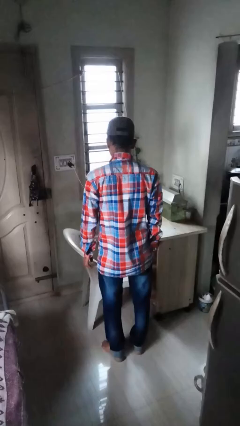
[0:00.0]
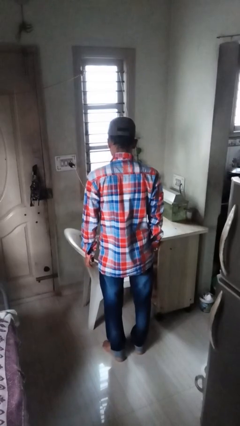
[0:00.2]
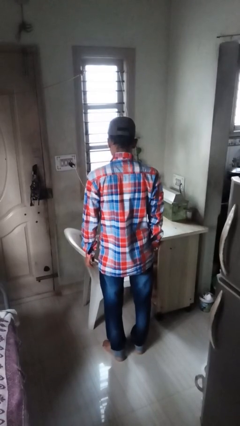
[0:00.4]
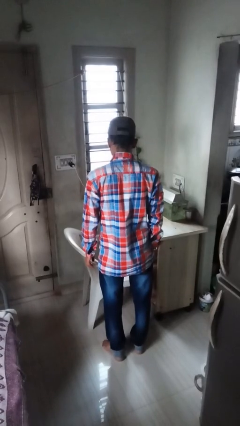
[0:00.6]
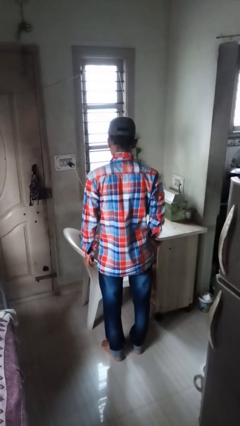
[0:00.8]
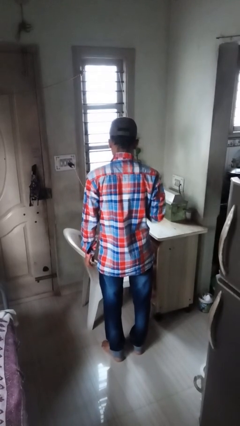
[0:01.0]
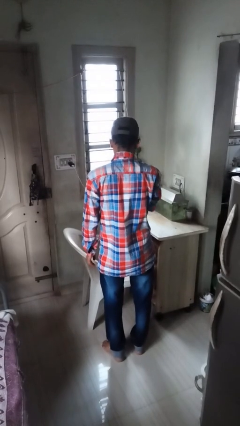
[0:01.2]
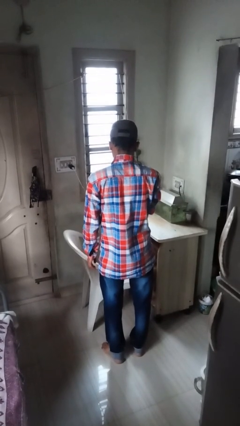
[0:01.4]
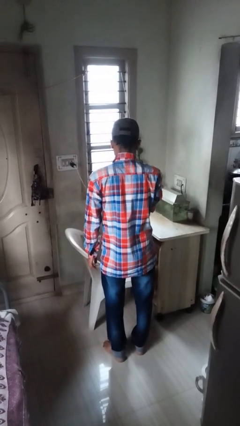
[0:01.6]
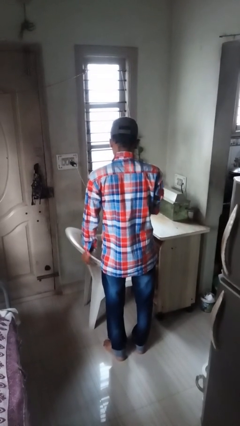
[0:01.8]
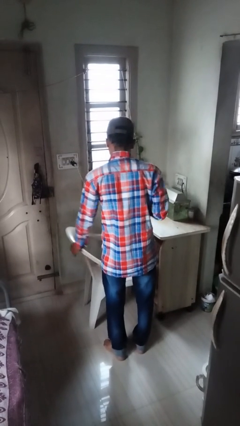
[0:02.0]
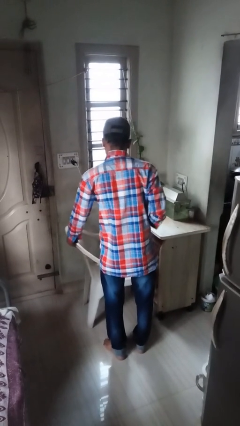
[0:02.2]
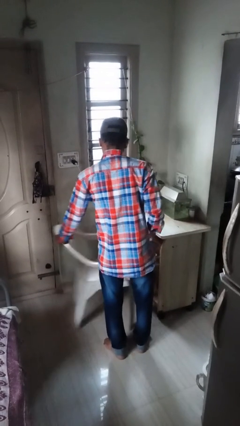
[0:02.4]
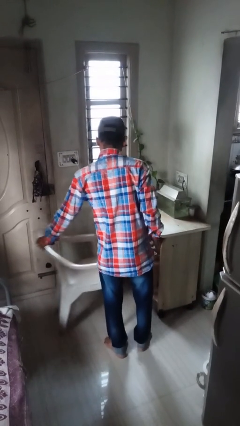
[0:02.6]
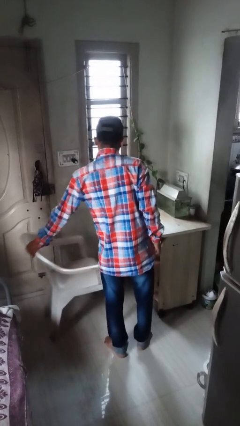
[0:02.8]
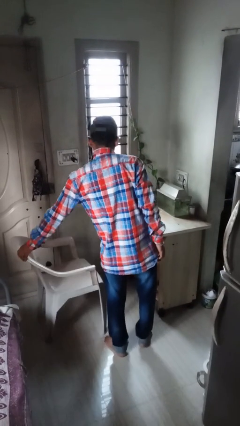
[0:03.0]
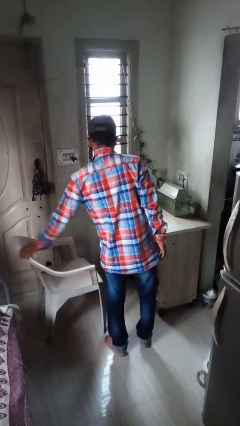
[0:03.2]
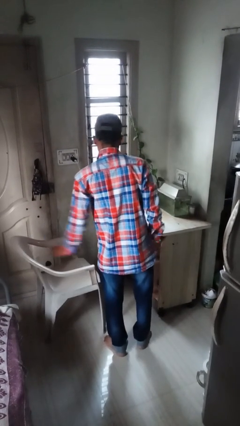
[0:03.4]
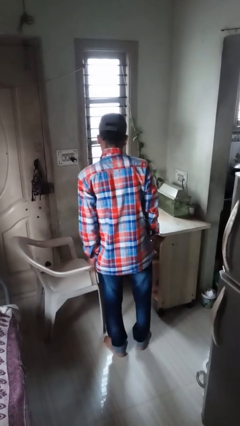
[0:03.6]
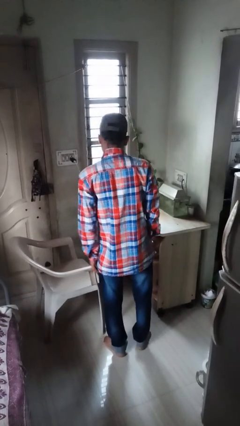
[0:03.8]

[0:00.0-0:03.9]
person pulls out chair

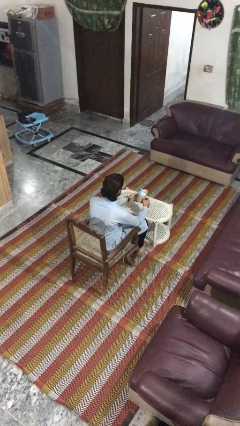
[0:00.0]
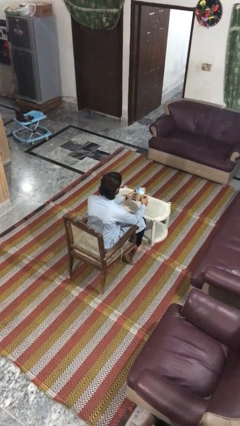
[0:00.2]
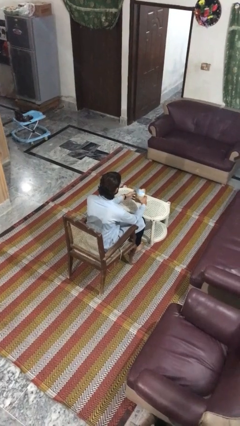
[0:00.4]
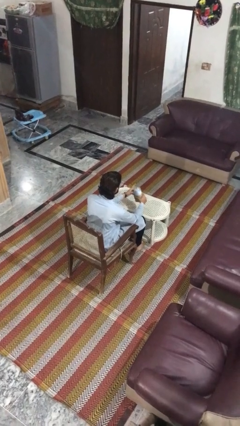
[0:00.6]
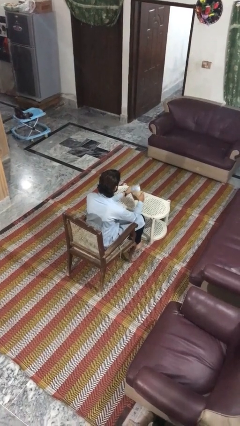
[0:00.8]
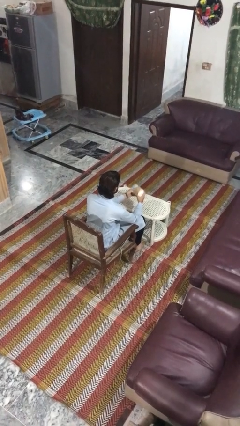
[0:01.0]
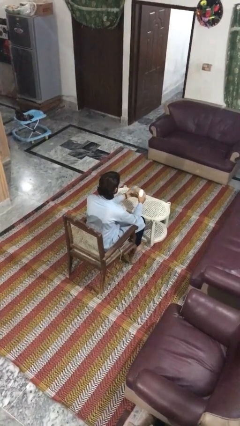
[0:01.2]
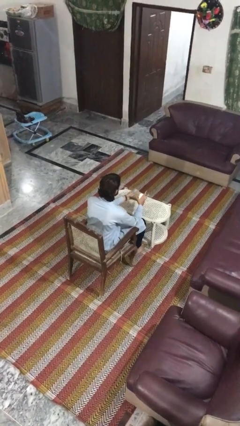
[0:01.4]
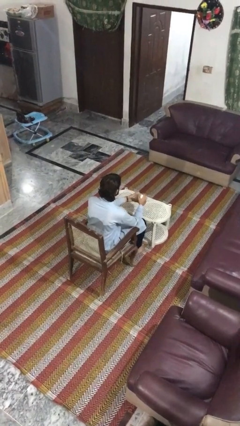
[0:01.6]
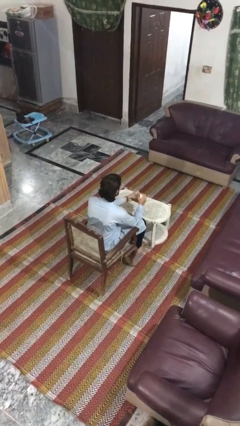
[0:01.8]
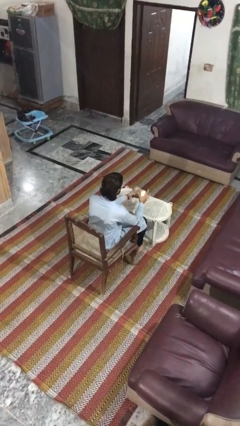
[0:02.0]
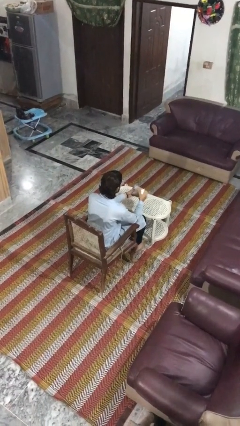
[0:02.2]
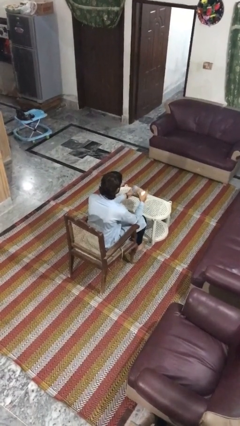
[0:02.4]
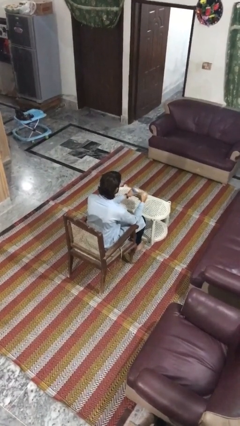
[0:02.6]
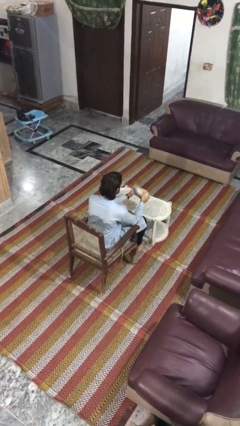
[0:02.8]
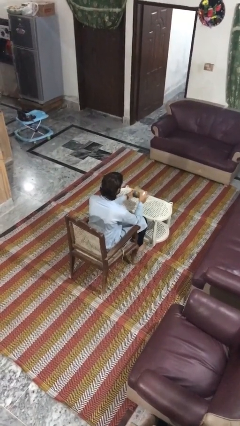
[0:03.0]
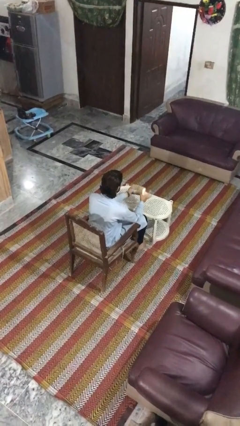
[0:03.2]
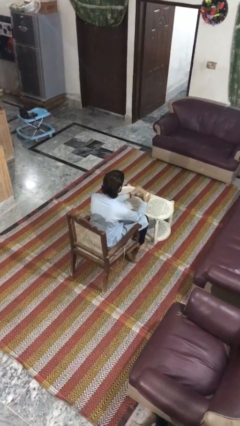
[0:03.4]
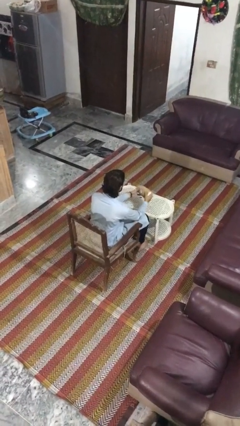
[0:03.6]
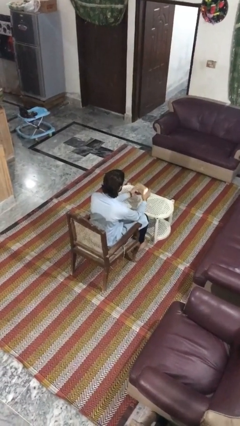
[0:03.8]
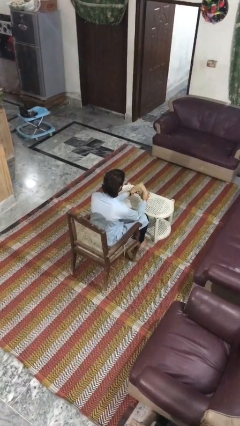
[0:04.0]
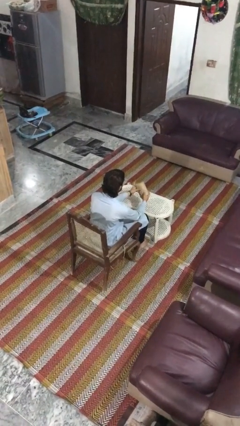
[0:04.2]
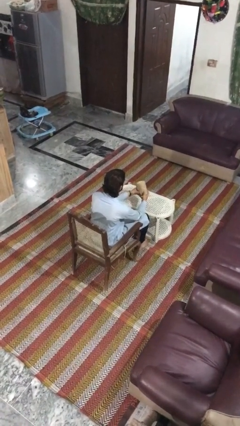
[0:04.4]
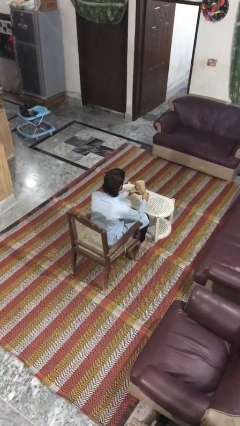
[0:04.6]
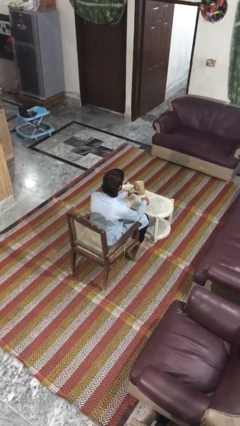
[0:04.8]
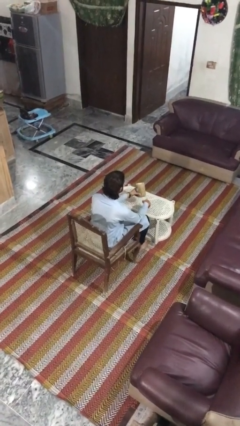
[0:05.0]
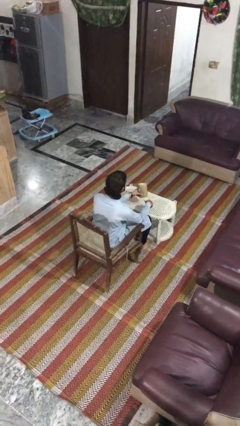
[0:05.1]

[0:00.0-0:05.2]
person squeezes object

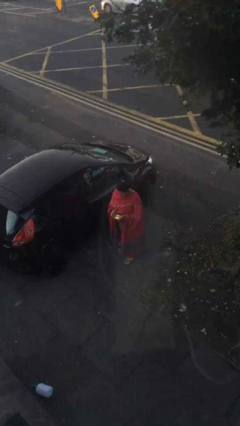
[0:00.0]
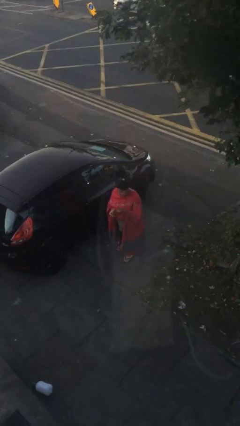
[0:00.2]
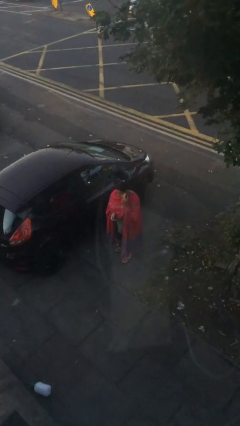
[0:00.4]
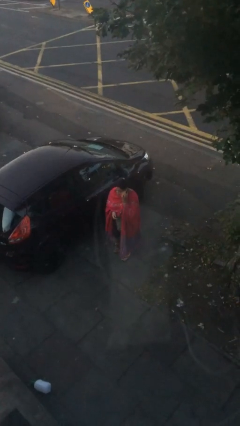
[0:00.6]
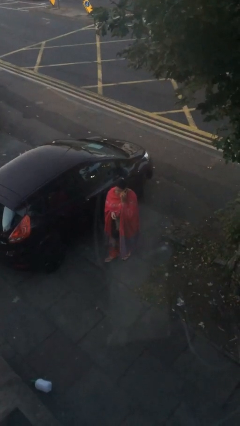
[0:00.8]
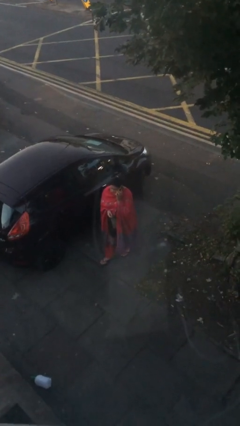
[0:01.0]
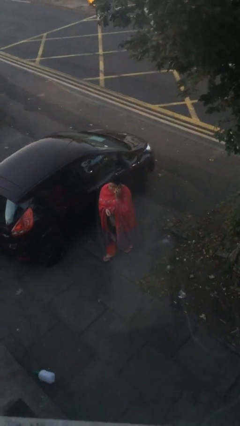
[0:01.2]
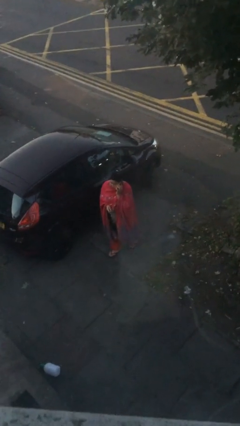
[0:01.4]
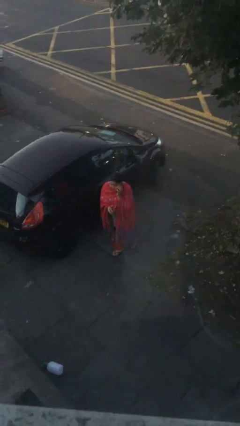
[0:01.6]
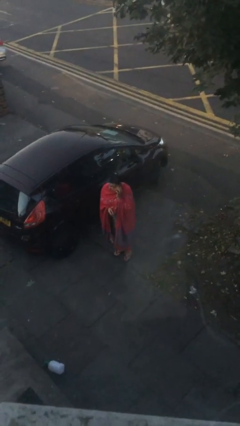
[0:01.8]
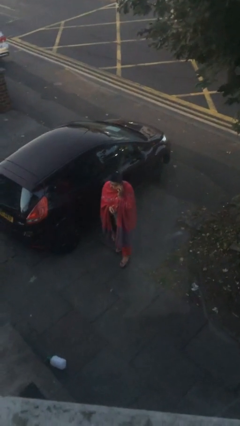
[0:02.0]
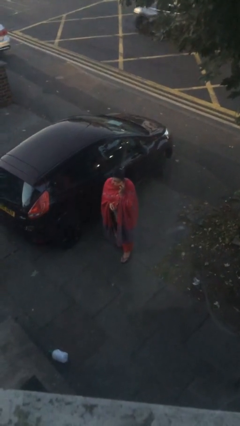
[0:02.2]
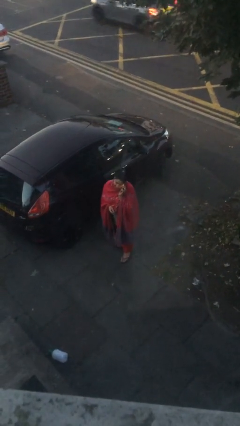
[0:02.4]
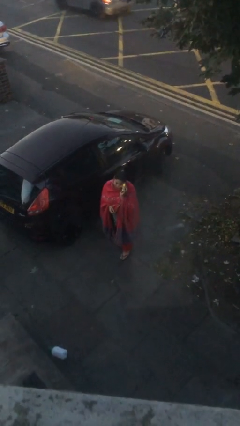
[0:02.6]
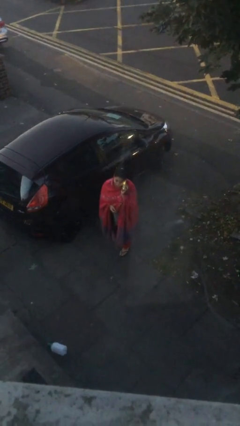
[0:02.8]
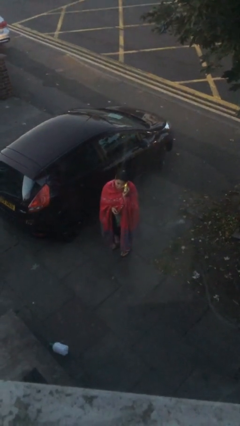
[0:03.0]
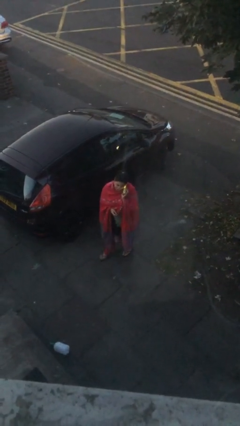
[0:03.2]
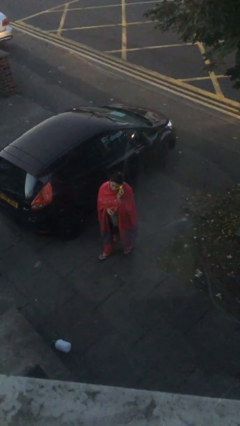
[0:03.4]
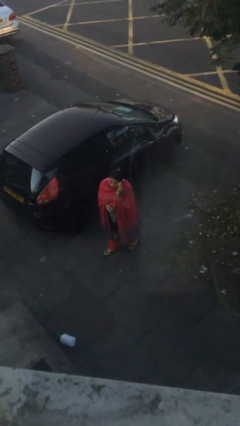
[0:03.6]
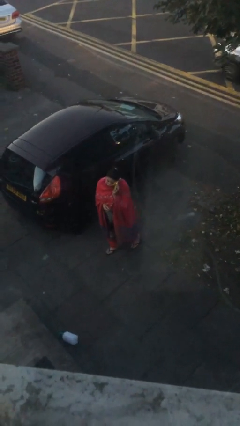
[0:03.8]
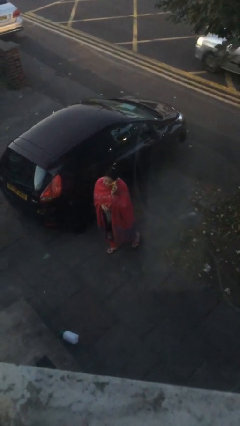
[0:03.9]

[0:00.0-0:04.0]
person talks on phone

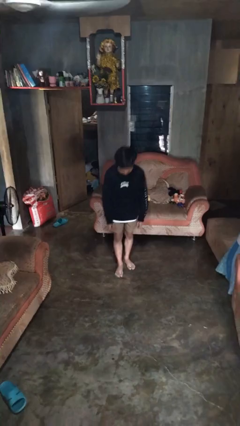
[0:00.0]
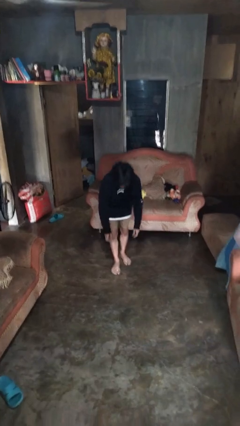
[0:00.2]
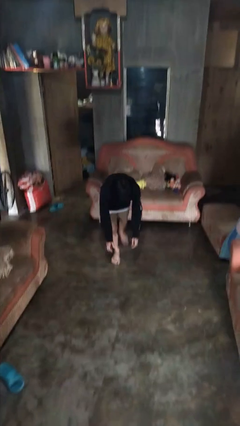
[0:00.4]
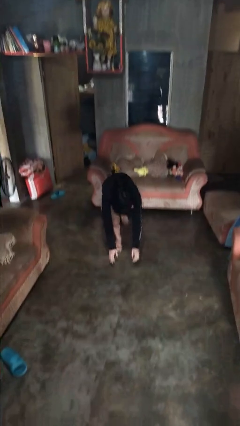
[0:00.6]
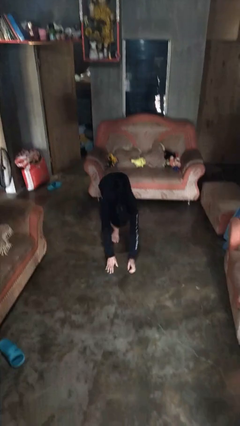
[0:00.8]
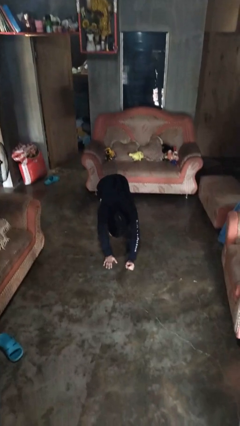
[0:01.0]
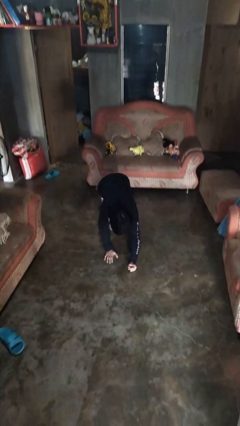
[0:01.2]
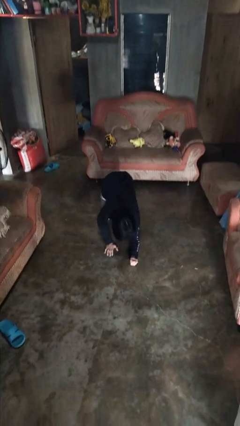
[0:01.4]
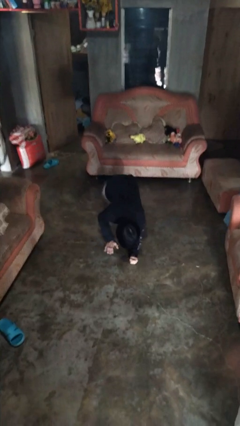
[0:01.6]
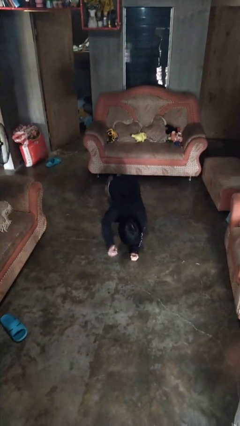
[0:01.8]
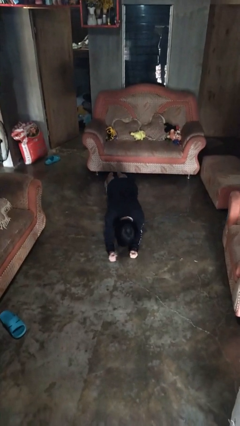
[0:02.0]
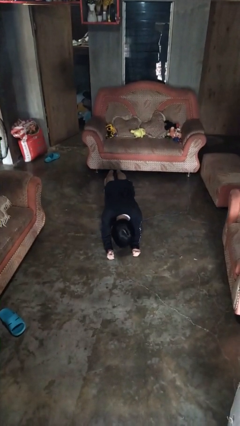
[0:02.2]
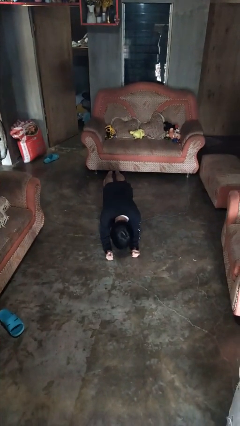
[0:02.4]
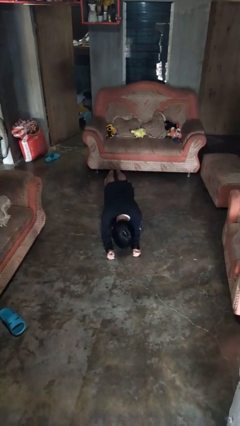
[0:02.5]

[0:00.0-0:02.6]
person exercises with plank

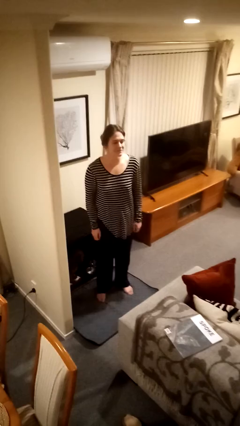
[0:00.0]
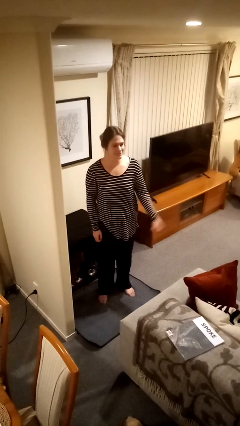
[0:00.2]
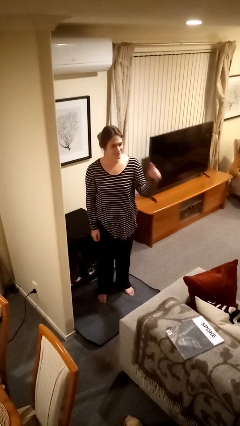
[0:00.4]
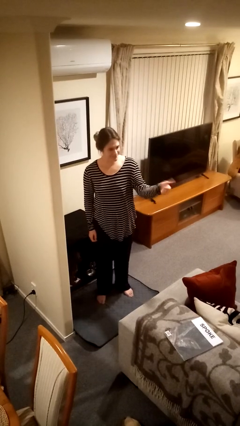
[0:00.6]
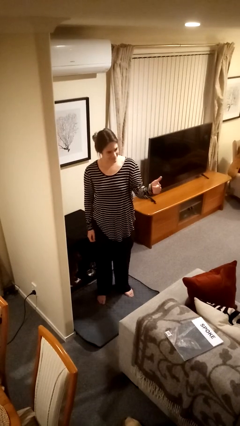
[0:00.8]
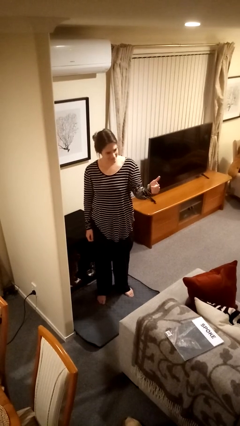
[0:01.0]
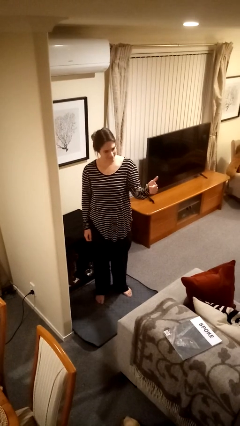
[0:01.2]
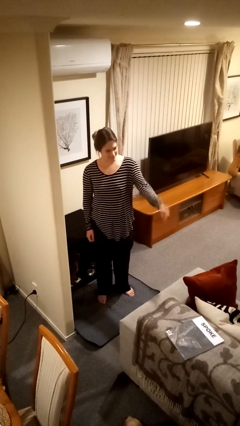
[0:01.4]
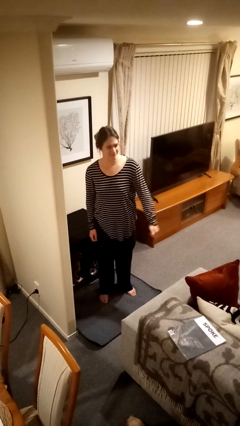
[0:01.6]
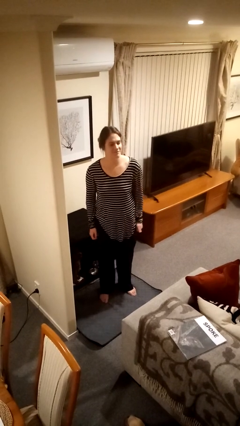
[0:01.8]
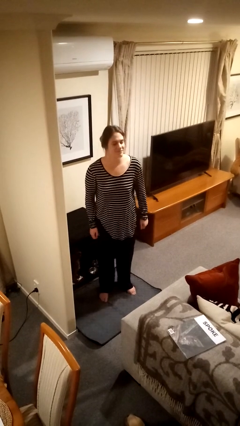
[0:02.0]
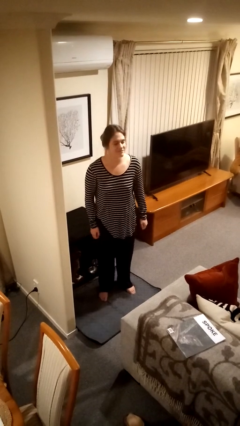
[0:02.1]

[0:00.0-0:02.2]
person gestures thumbs up

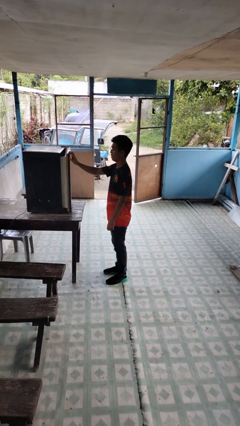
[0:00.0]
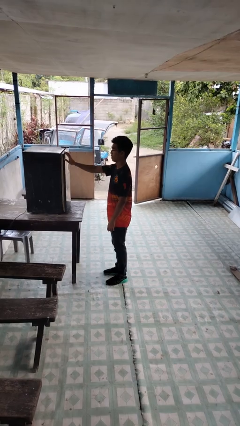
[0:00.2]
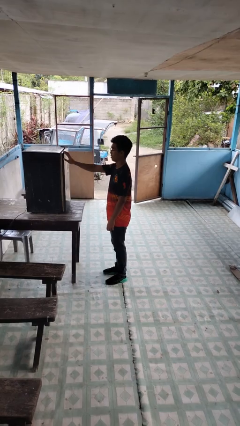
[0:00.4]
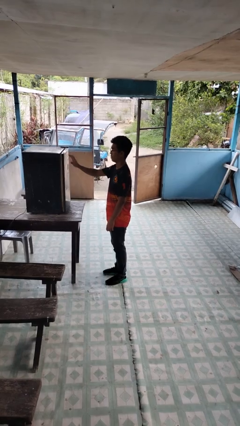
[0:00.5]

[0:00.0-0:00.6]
person closes refrigerator
